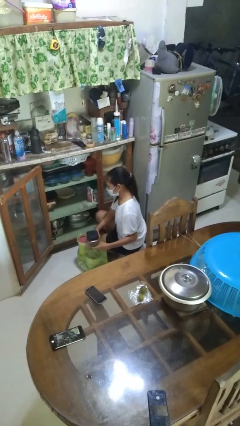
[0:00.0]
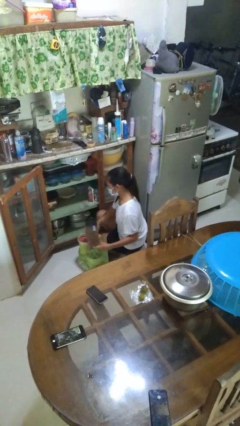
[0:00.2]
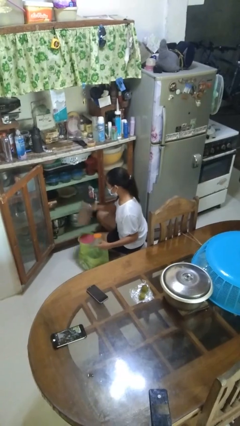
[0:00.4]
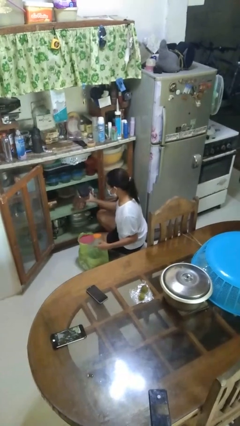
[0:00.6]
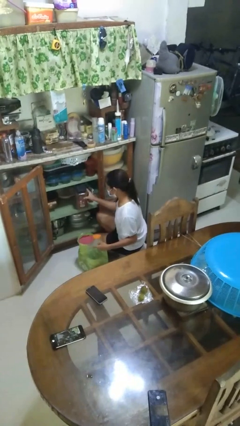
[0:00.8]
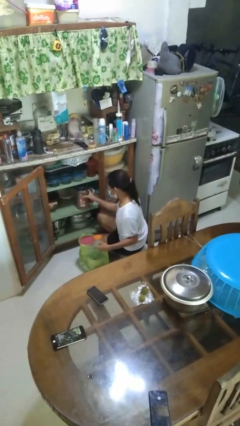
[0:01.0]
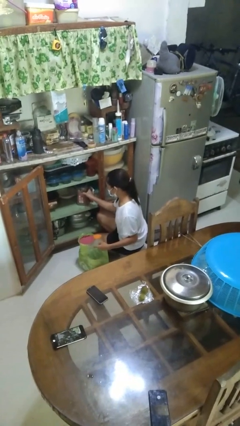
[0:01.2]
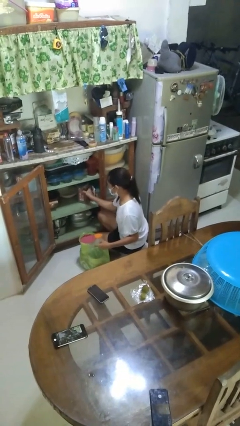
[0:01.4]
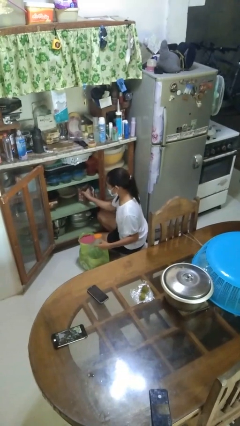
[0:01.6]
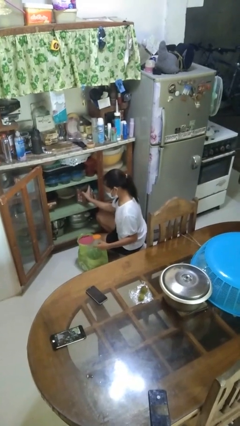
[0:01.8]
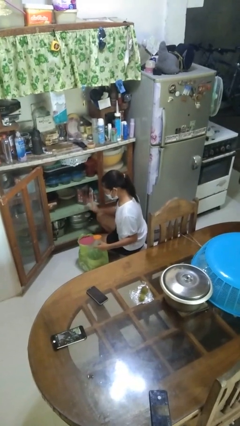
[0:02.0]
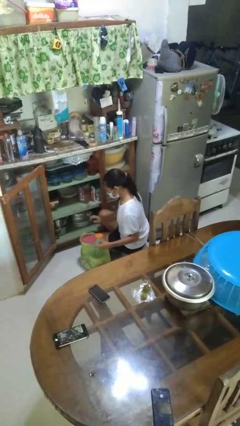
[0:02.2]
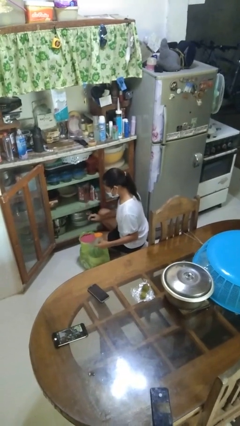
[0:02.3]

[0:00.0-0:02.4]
person loads groceries into cabinet

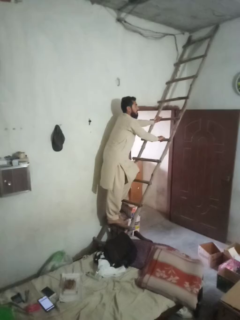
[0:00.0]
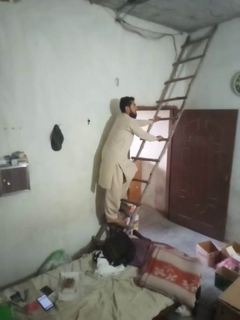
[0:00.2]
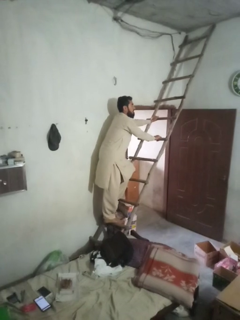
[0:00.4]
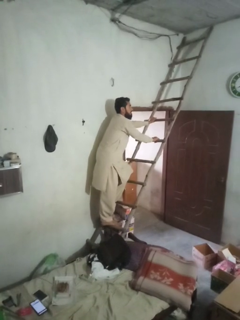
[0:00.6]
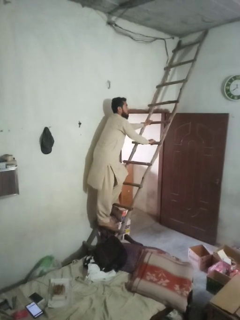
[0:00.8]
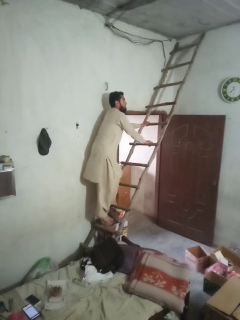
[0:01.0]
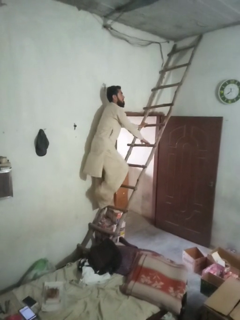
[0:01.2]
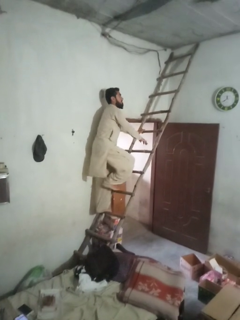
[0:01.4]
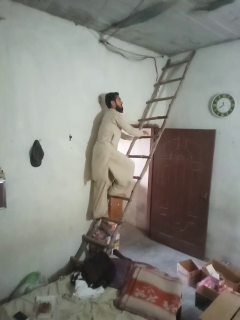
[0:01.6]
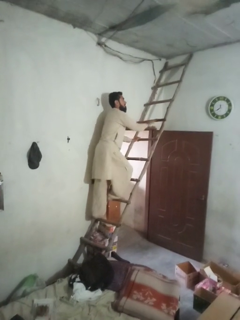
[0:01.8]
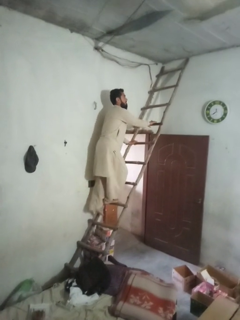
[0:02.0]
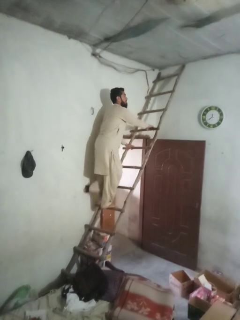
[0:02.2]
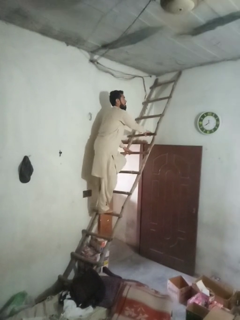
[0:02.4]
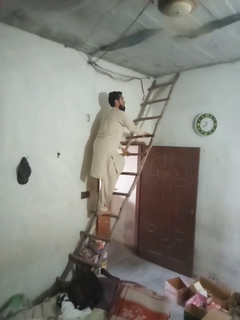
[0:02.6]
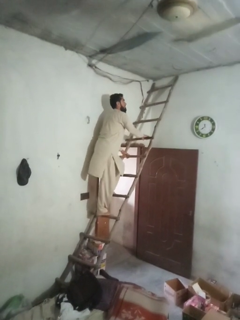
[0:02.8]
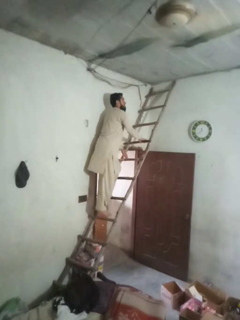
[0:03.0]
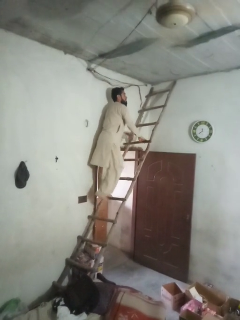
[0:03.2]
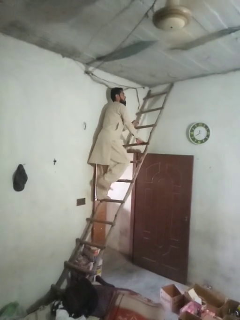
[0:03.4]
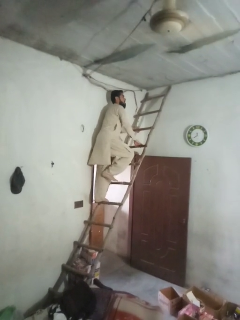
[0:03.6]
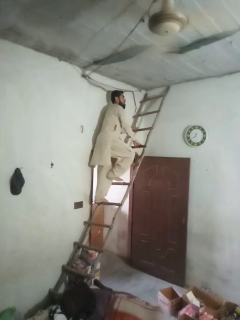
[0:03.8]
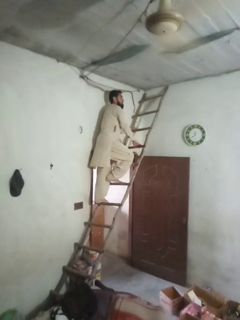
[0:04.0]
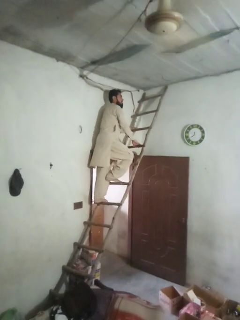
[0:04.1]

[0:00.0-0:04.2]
person climbs up ladder

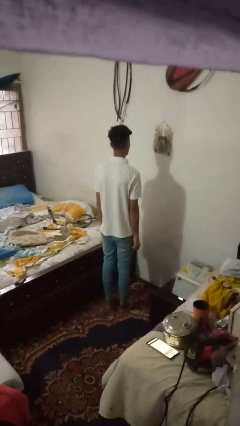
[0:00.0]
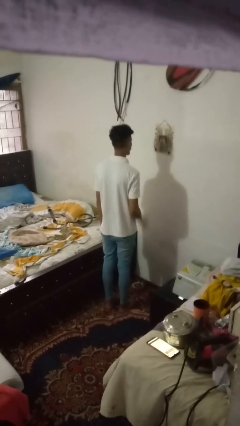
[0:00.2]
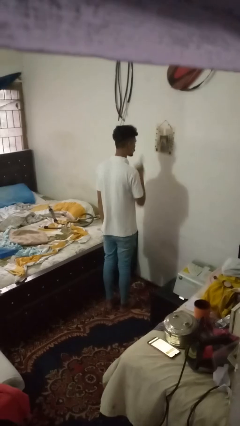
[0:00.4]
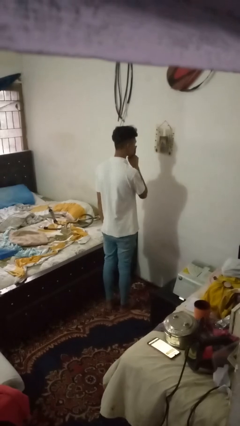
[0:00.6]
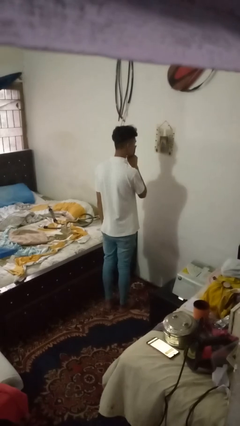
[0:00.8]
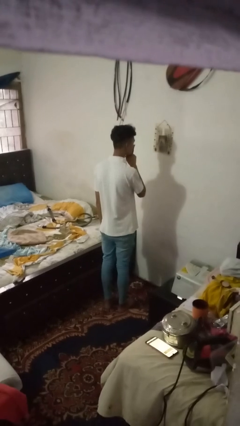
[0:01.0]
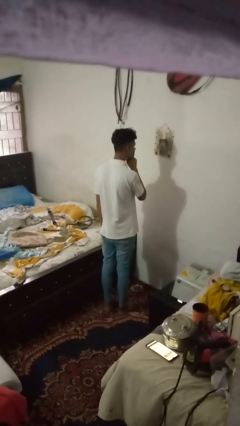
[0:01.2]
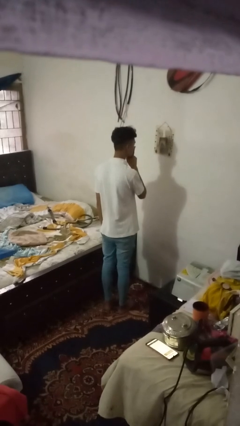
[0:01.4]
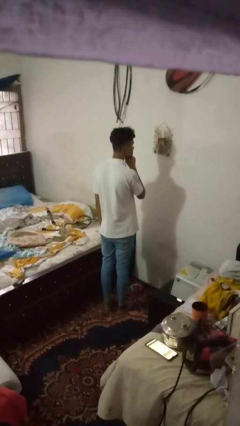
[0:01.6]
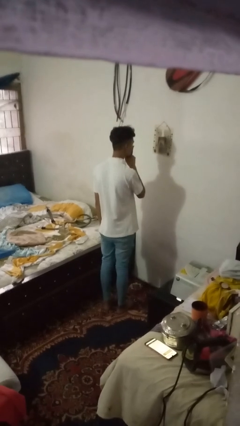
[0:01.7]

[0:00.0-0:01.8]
person gestures be quiet

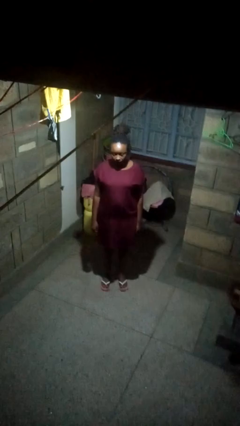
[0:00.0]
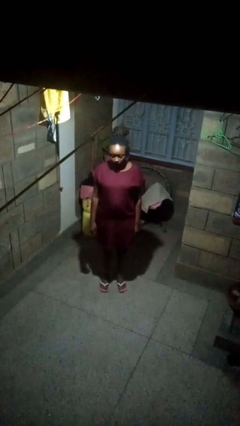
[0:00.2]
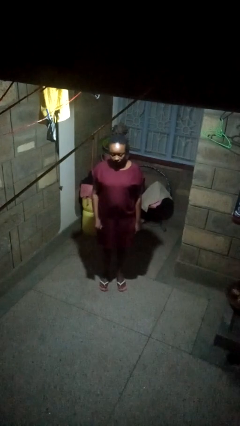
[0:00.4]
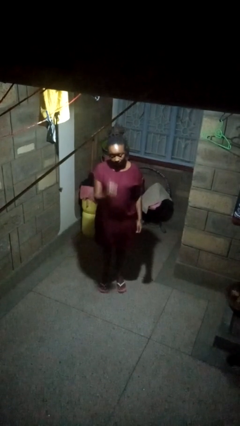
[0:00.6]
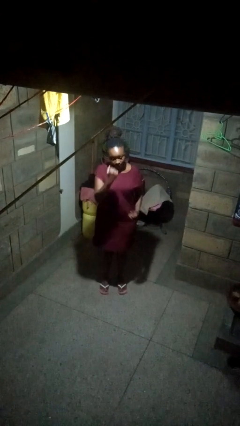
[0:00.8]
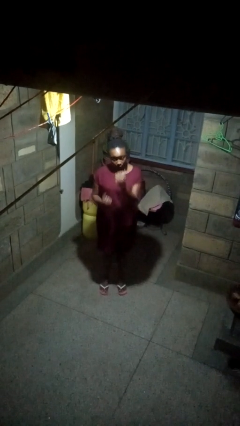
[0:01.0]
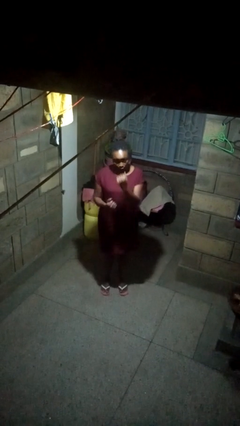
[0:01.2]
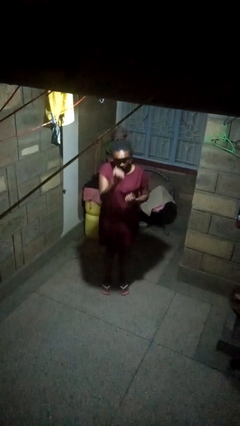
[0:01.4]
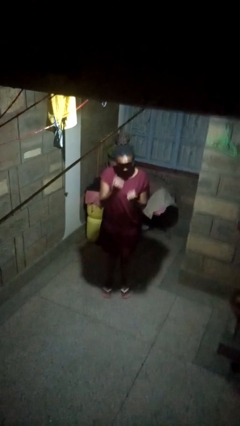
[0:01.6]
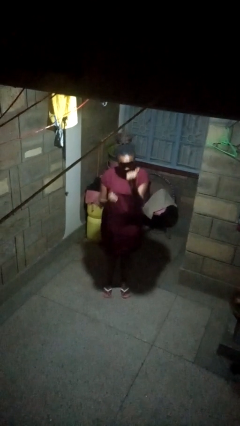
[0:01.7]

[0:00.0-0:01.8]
person punches

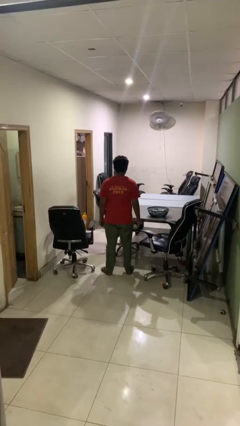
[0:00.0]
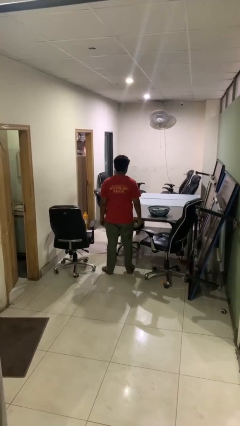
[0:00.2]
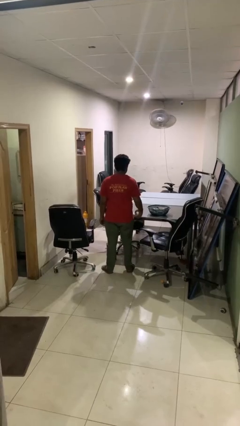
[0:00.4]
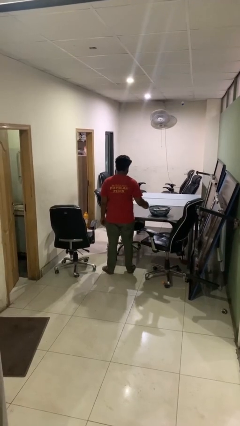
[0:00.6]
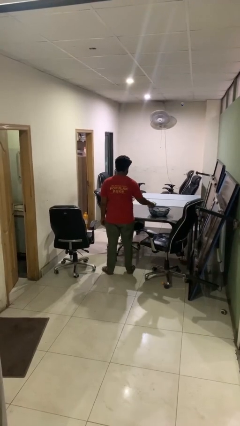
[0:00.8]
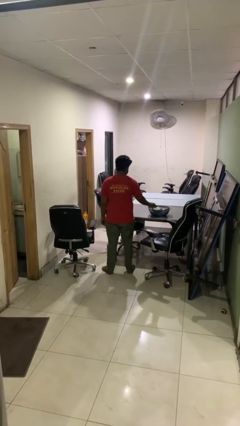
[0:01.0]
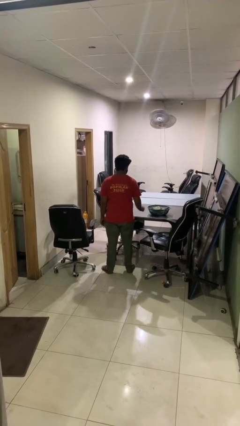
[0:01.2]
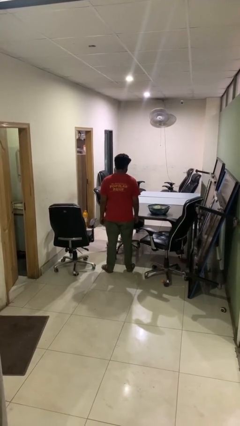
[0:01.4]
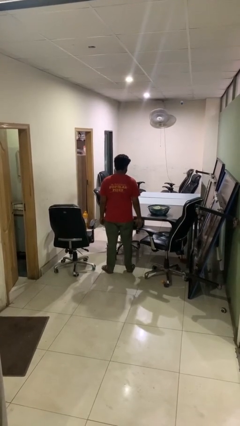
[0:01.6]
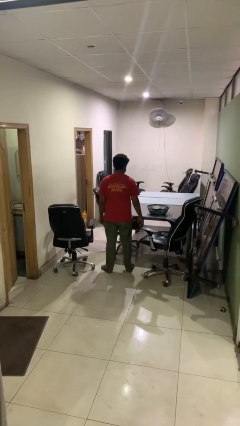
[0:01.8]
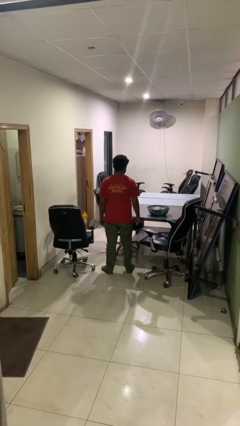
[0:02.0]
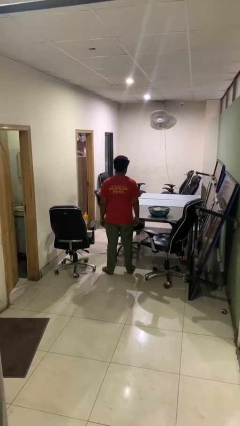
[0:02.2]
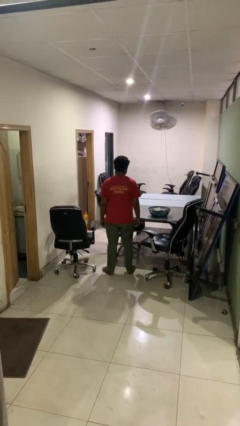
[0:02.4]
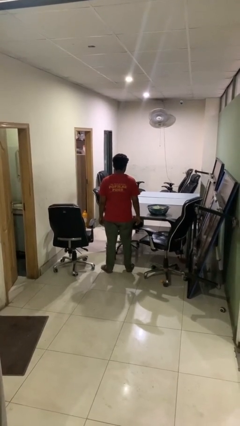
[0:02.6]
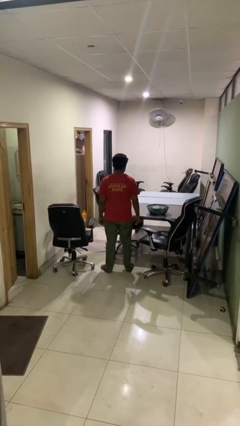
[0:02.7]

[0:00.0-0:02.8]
person puts object into basket

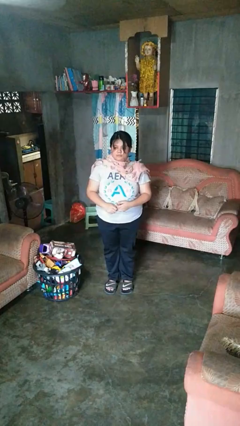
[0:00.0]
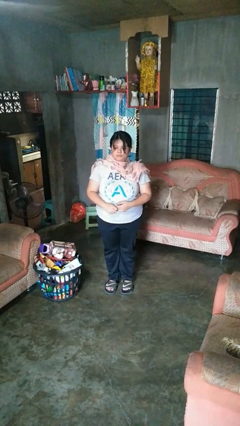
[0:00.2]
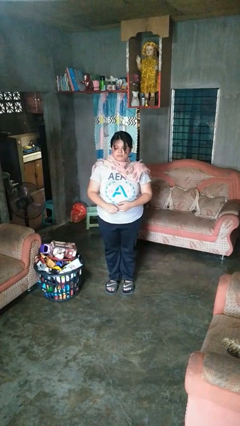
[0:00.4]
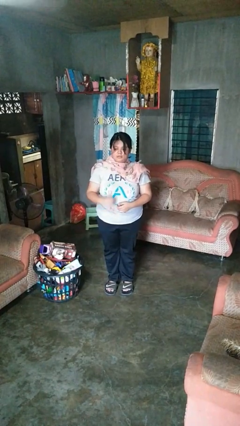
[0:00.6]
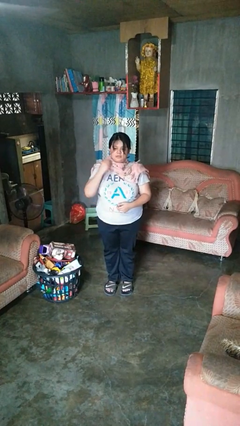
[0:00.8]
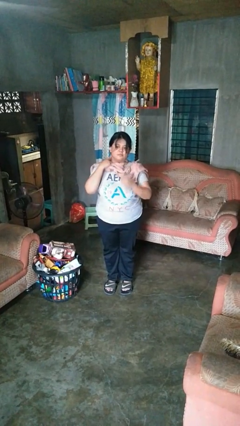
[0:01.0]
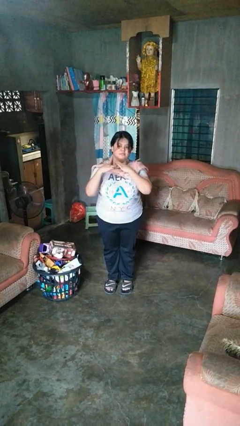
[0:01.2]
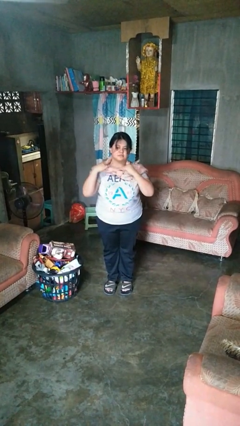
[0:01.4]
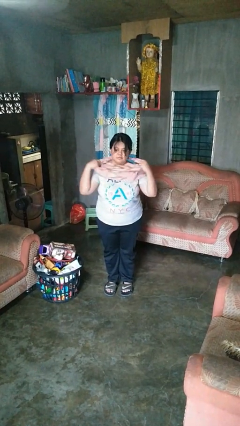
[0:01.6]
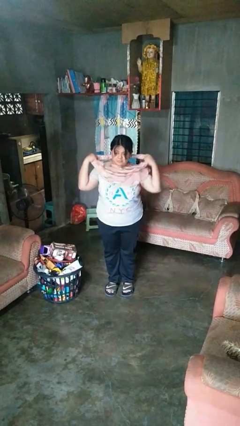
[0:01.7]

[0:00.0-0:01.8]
person takes off scarf

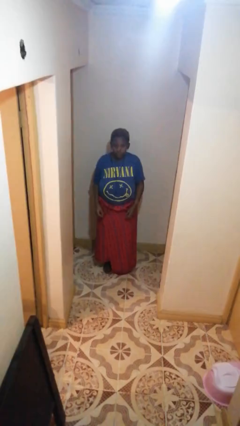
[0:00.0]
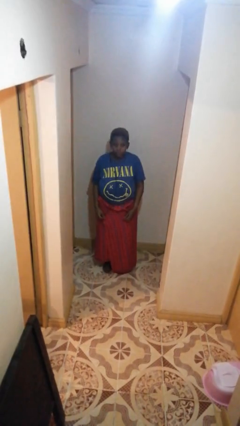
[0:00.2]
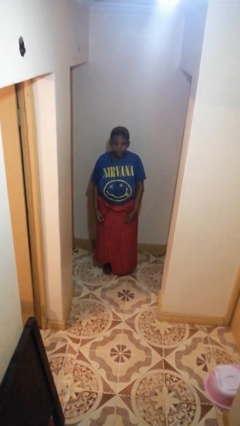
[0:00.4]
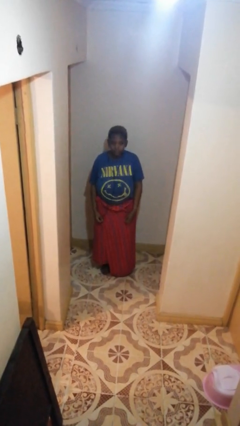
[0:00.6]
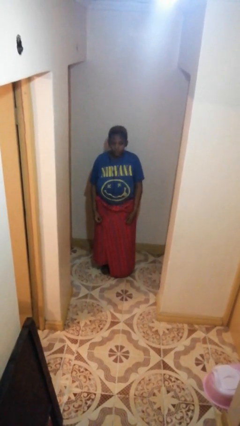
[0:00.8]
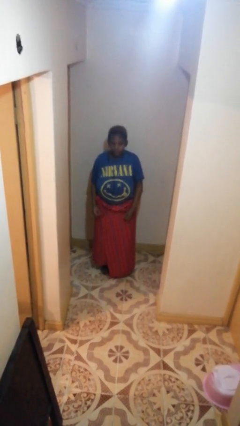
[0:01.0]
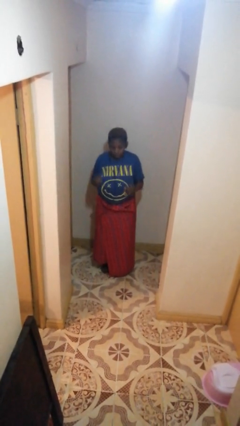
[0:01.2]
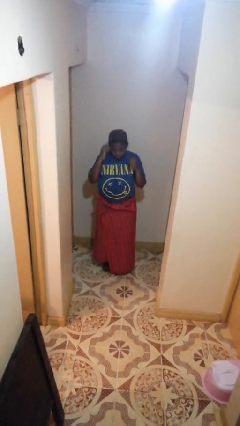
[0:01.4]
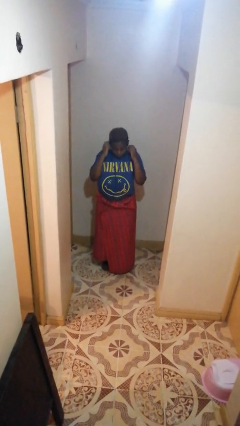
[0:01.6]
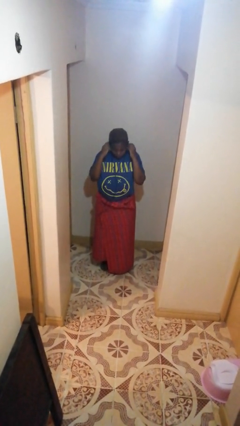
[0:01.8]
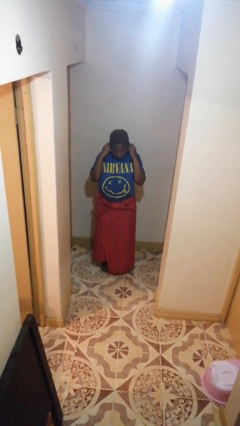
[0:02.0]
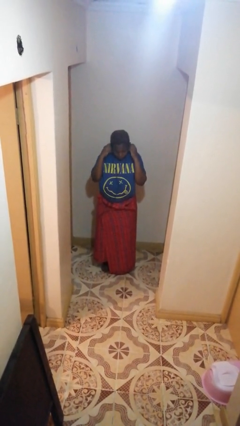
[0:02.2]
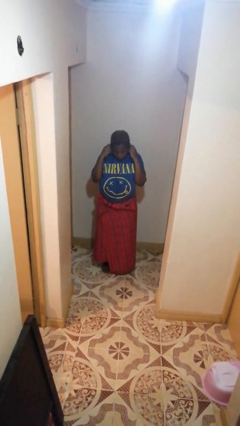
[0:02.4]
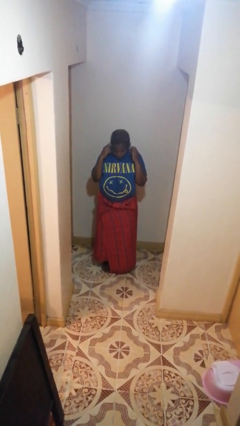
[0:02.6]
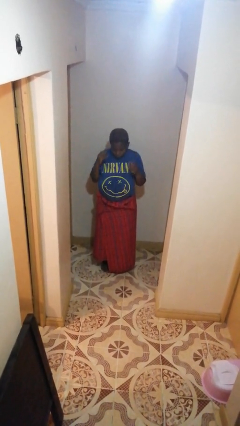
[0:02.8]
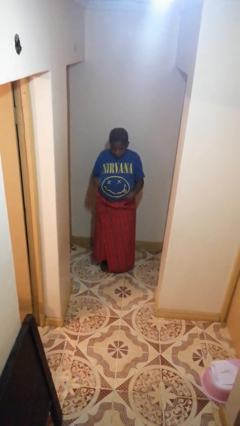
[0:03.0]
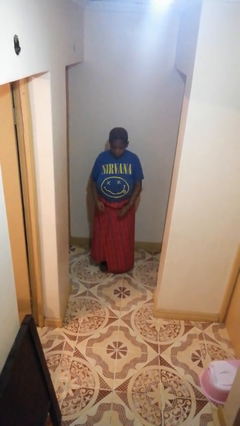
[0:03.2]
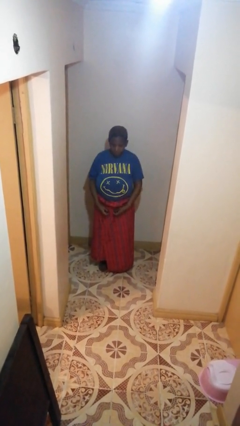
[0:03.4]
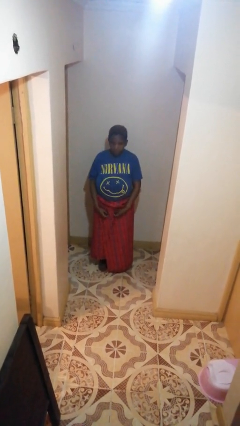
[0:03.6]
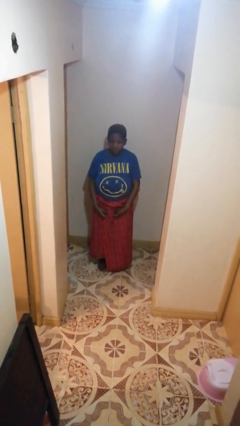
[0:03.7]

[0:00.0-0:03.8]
person takes off headphones
